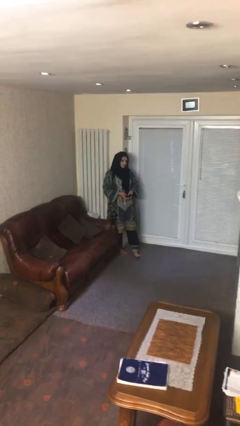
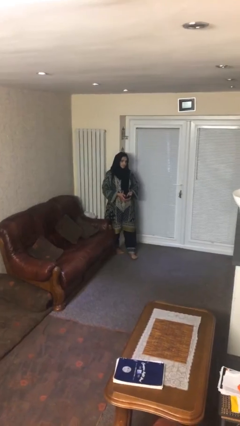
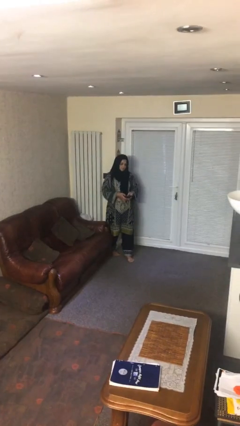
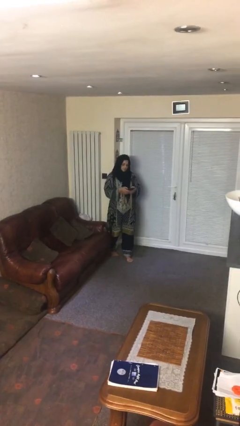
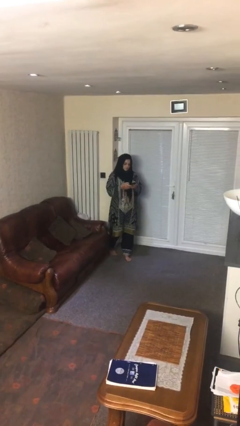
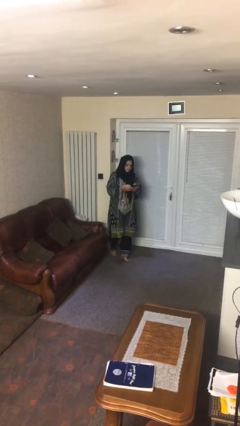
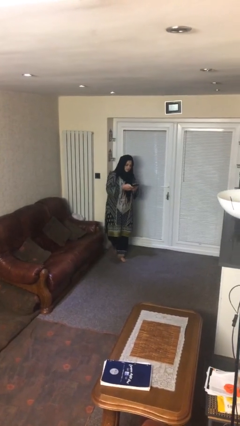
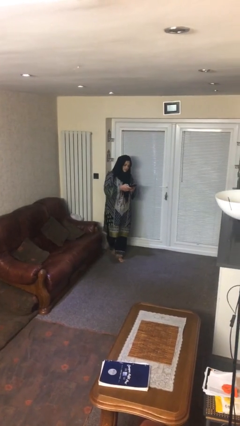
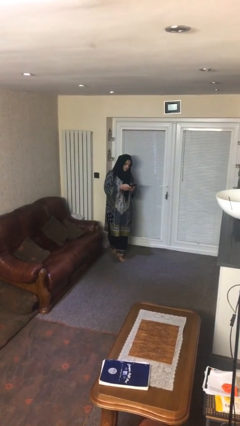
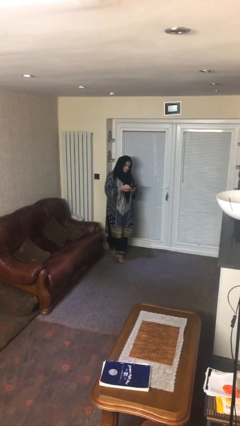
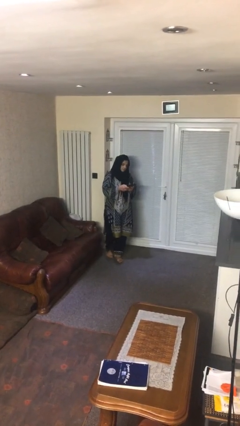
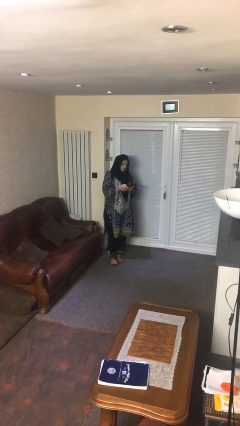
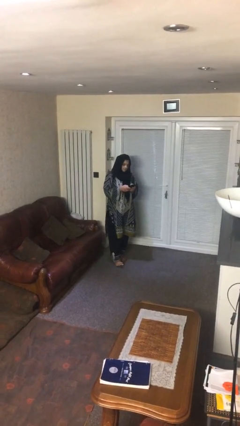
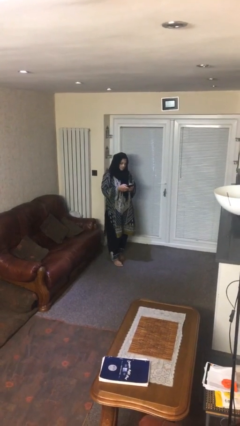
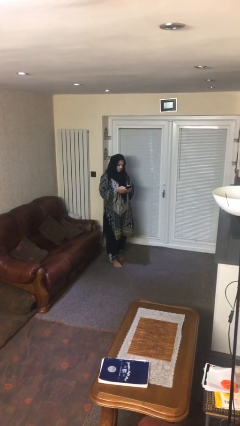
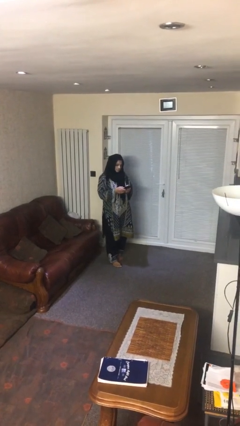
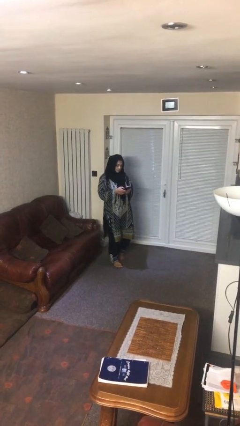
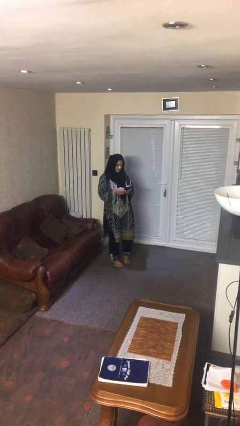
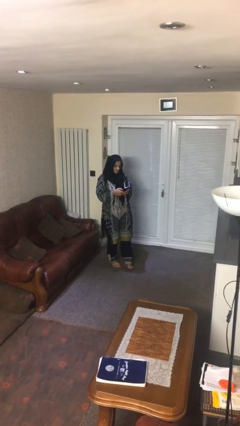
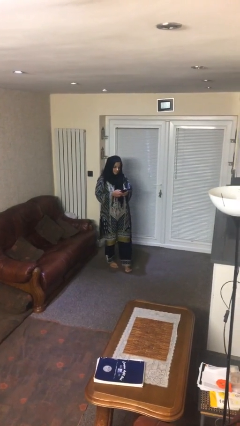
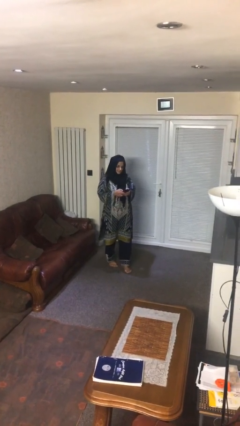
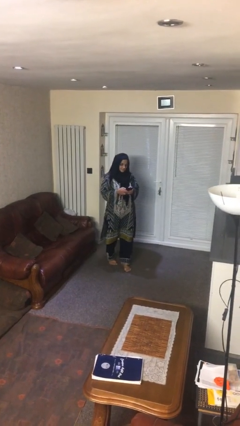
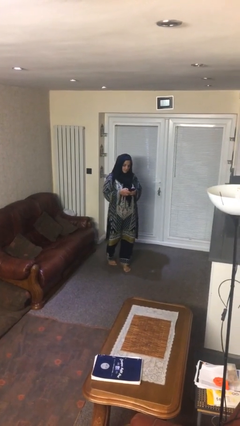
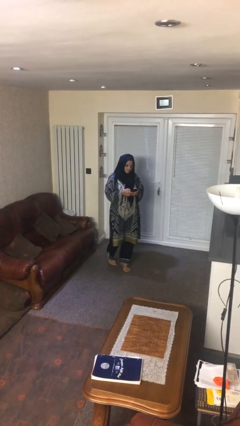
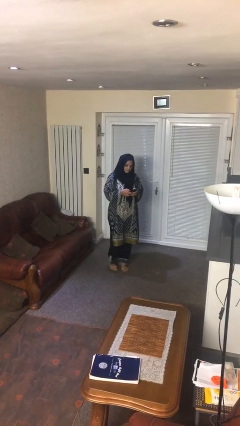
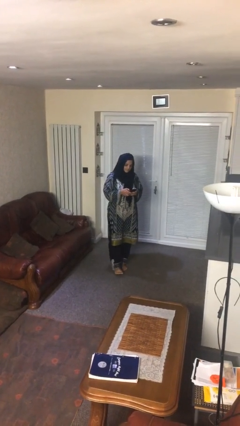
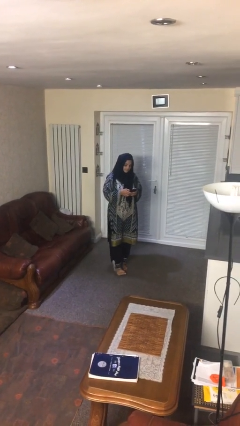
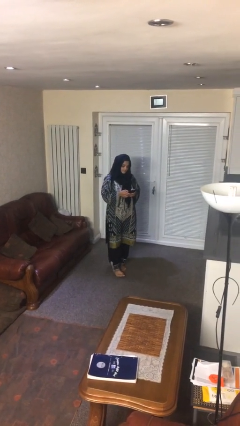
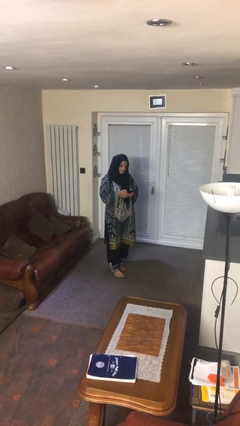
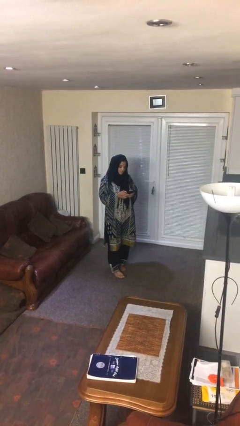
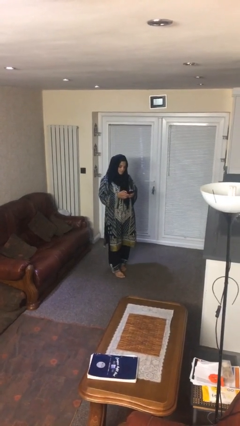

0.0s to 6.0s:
person texts on phone

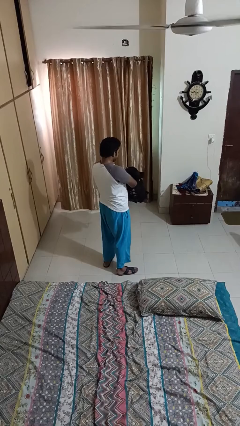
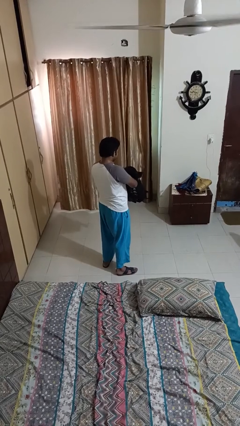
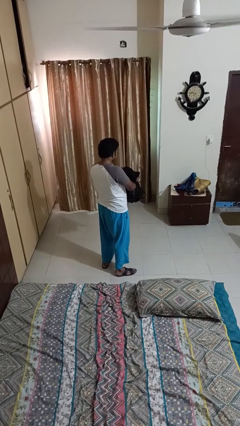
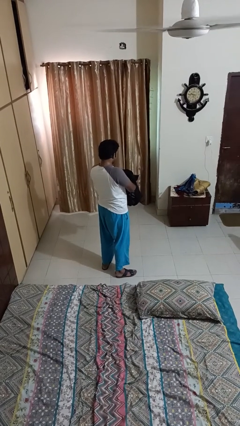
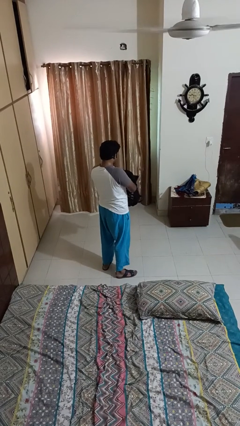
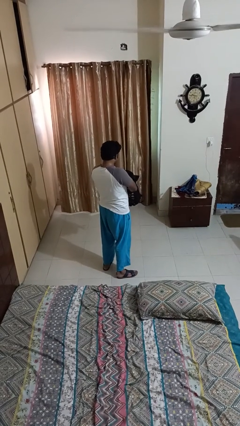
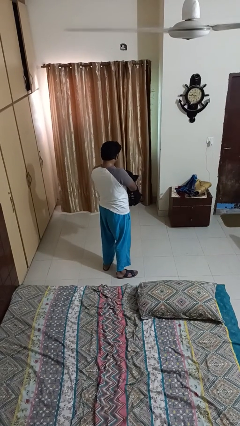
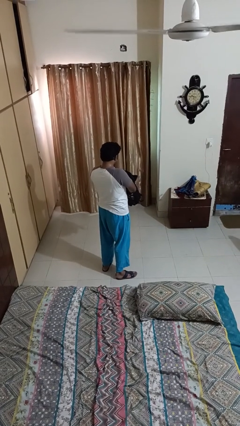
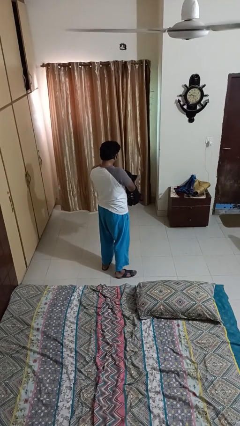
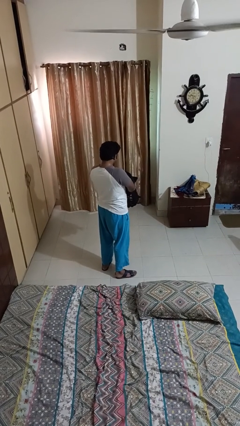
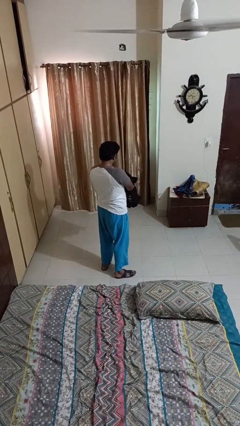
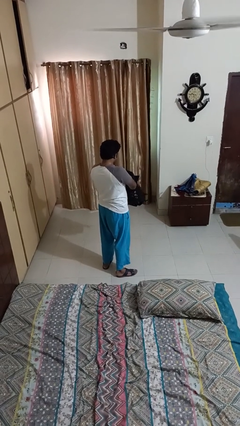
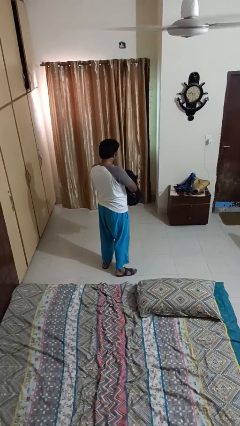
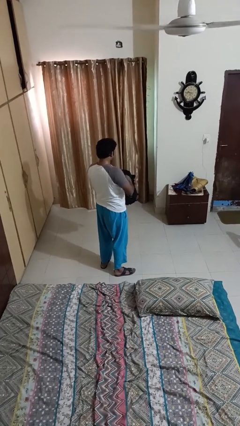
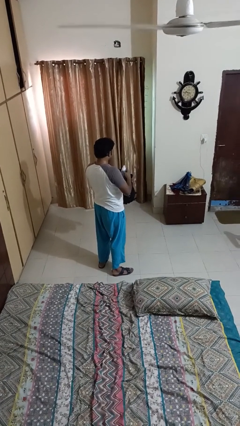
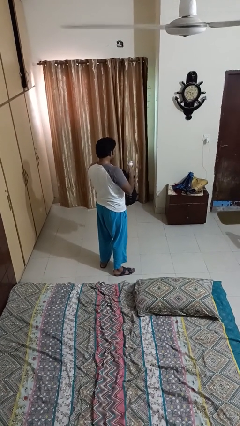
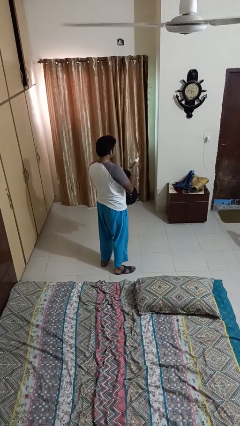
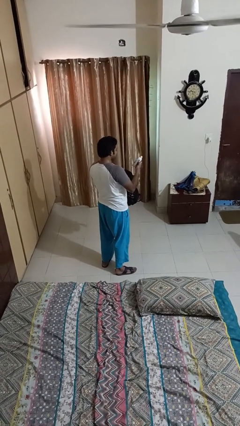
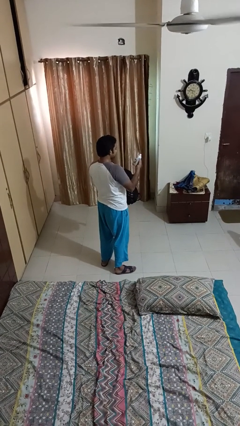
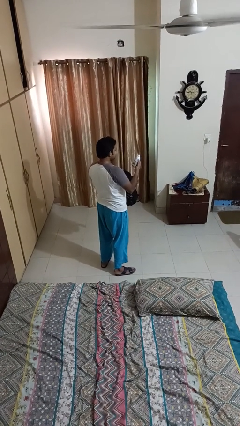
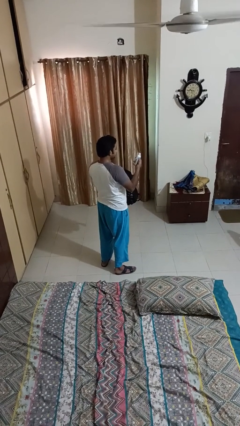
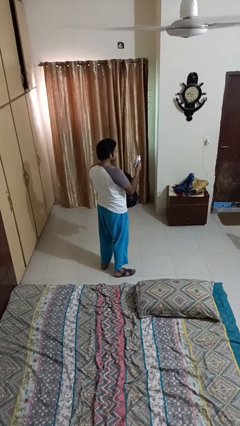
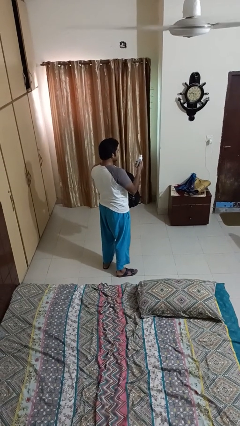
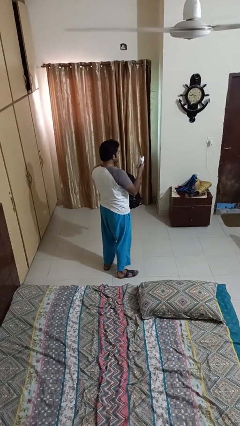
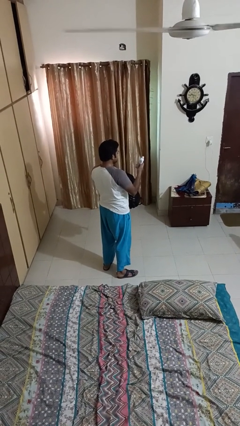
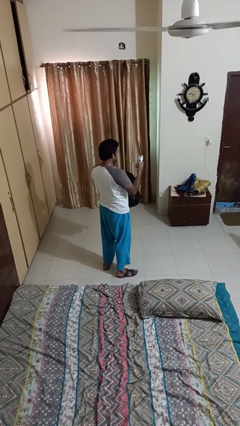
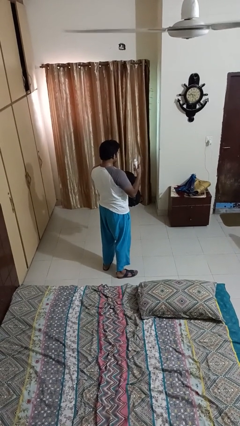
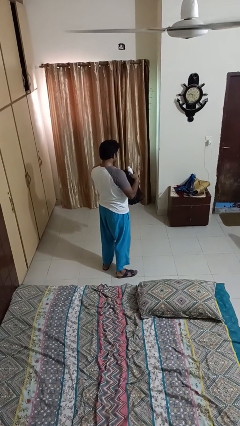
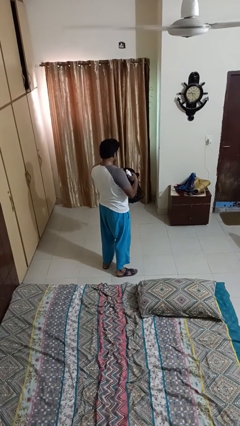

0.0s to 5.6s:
person lies down on couch

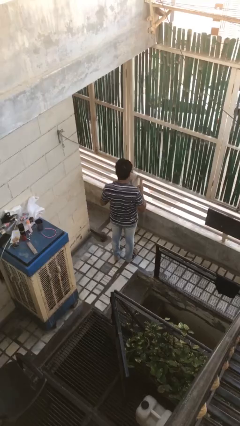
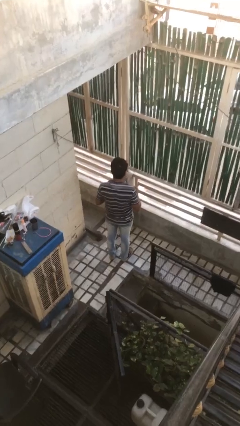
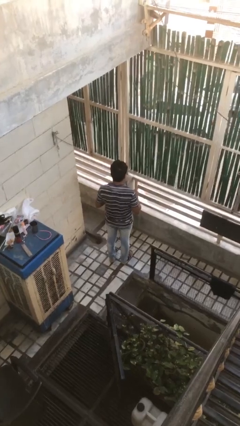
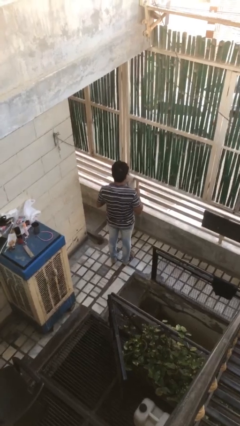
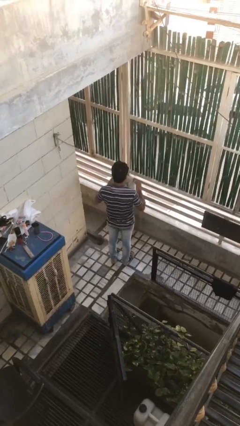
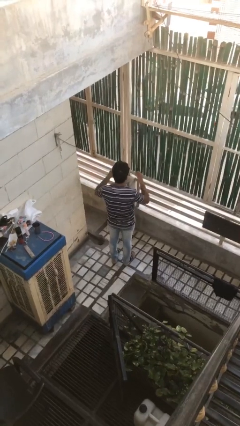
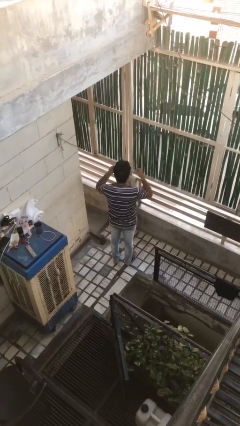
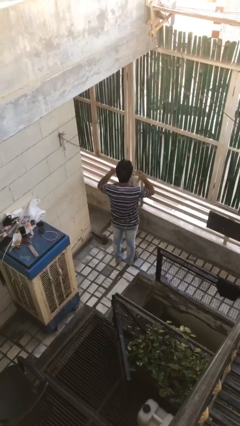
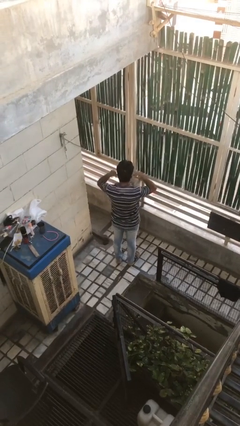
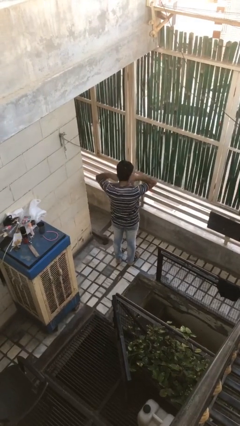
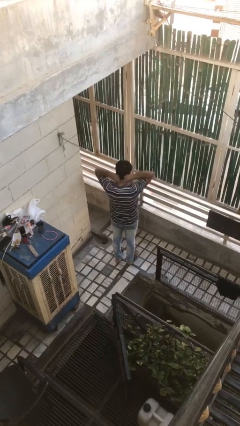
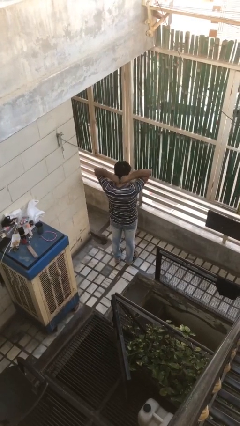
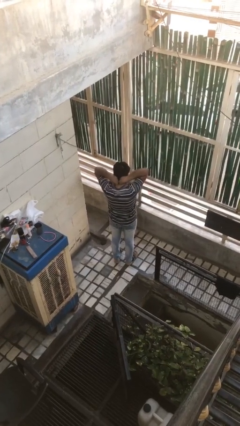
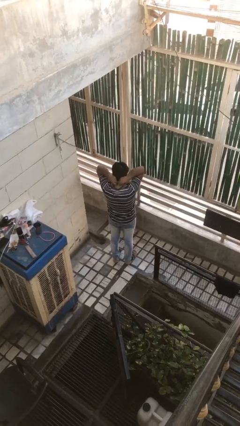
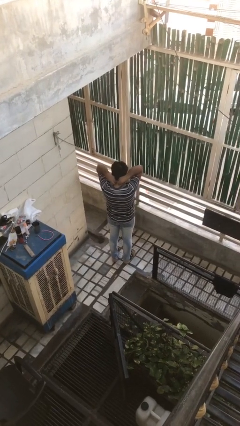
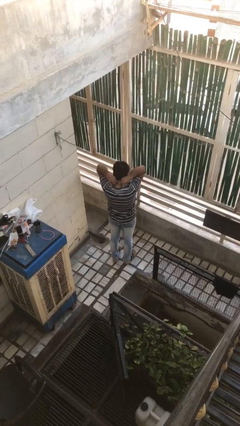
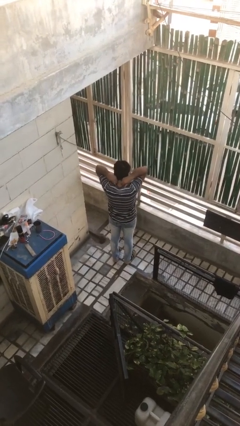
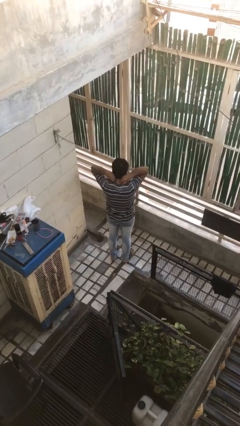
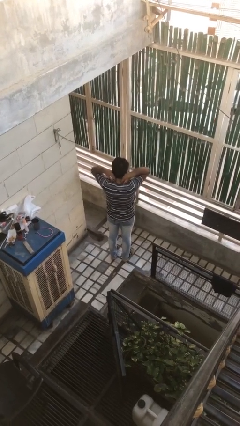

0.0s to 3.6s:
person puts on necklace

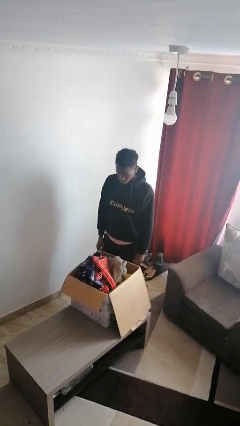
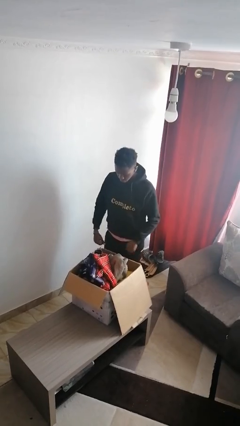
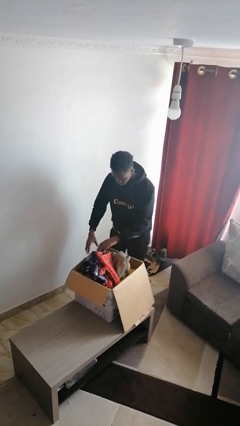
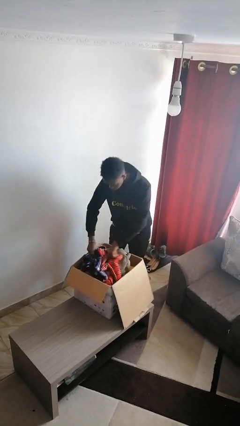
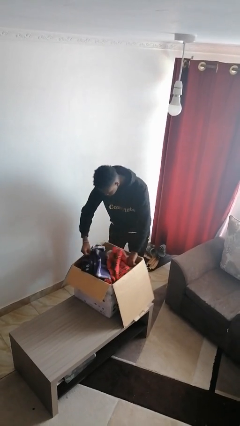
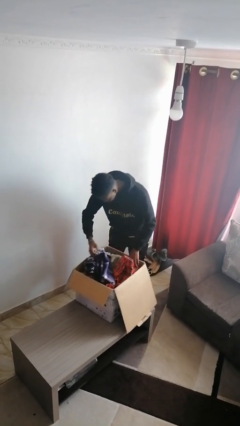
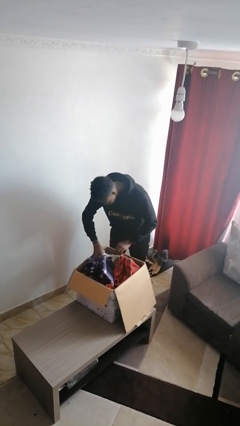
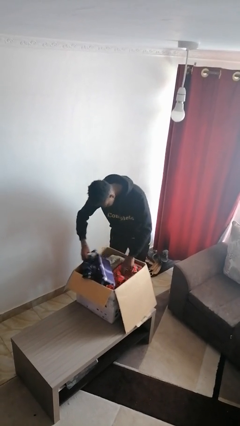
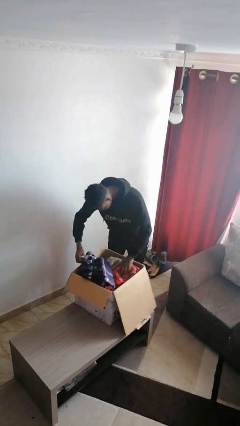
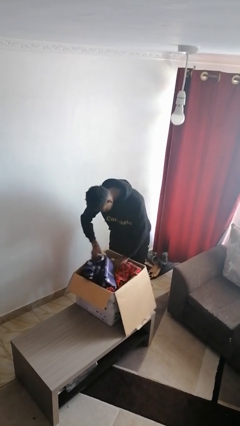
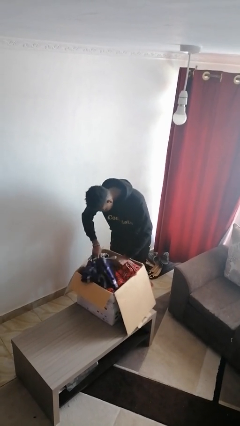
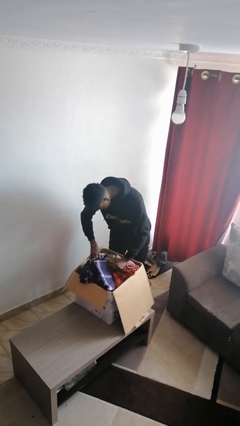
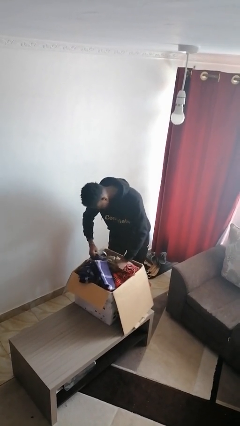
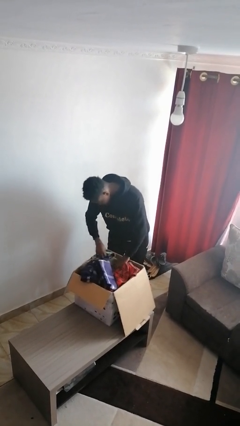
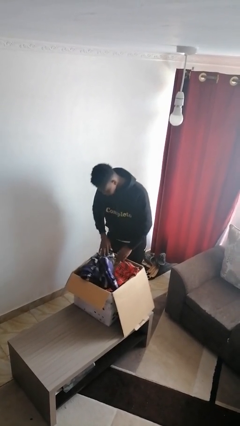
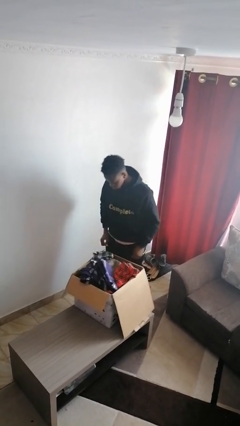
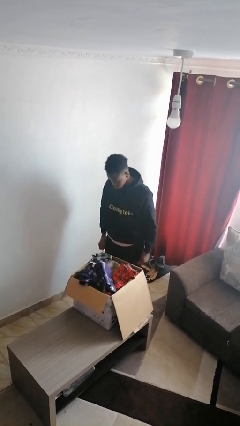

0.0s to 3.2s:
person searches in box
